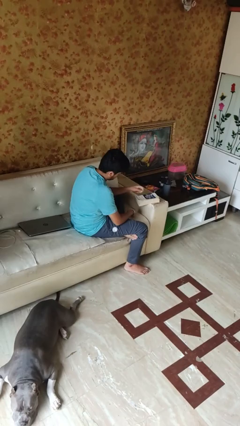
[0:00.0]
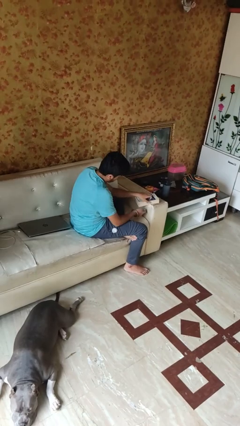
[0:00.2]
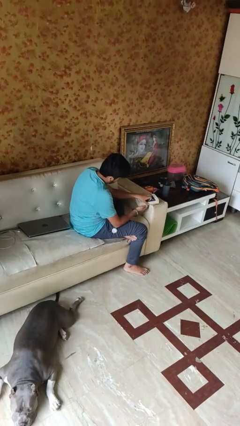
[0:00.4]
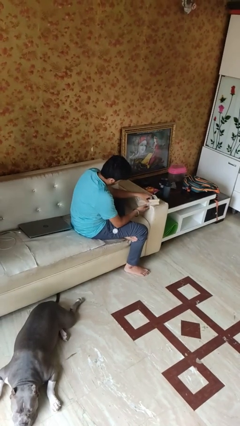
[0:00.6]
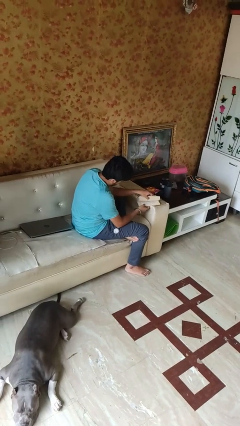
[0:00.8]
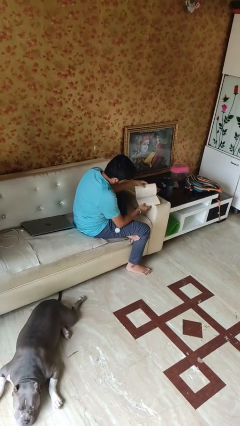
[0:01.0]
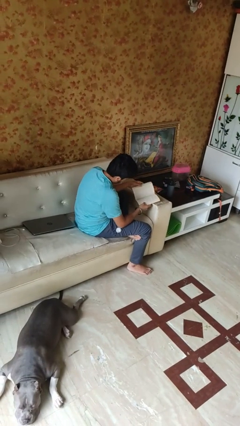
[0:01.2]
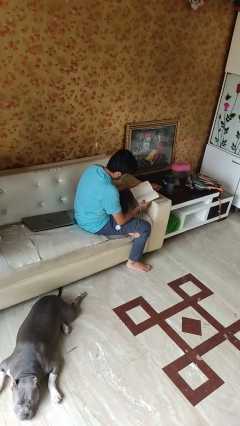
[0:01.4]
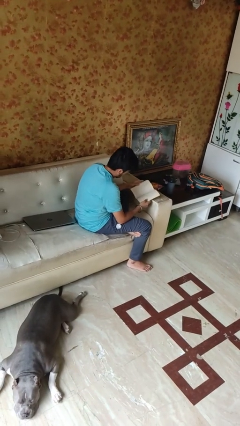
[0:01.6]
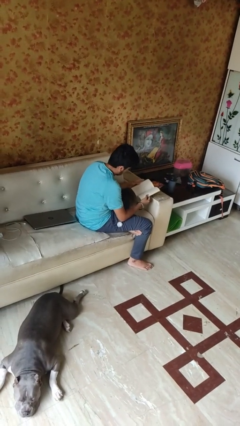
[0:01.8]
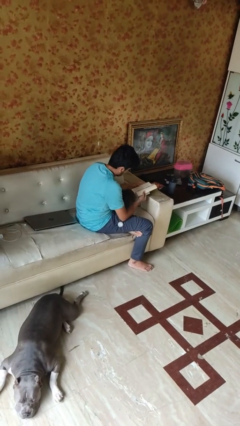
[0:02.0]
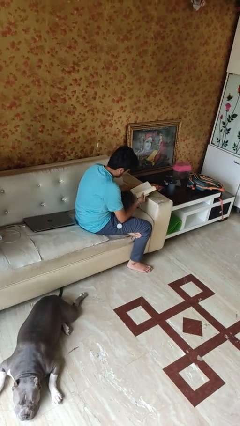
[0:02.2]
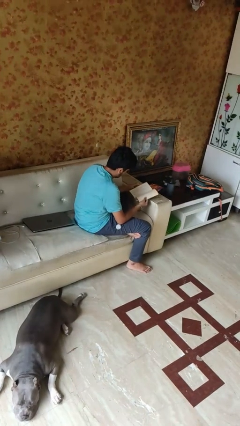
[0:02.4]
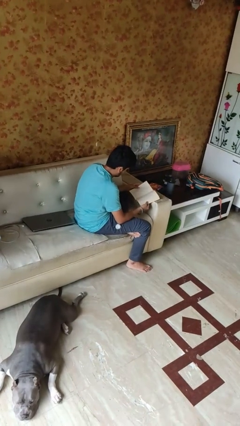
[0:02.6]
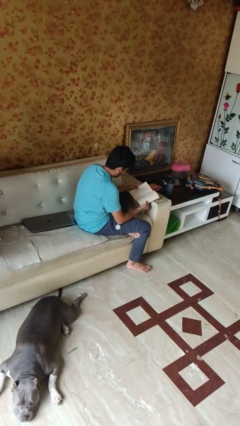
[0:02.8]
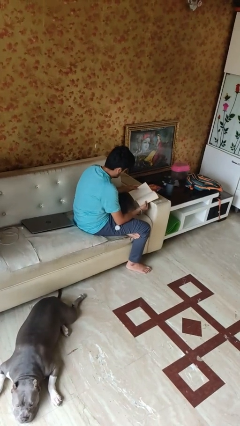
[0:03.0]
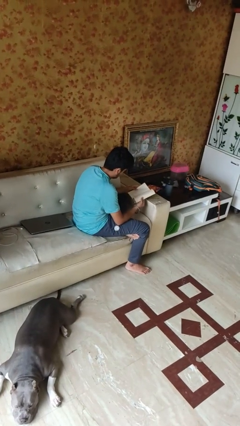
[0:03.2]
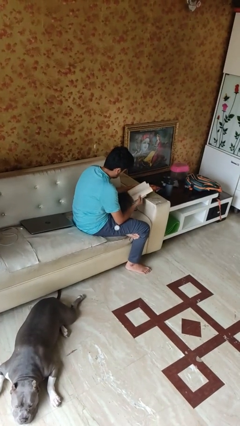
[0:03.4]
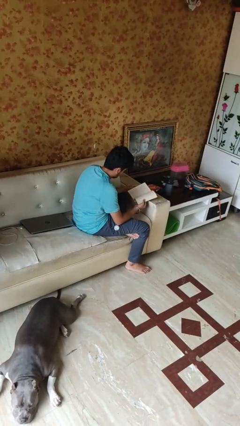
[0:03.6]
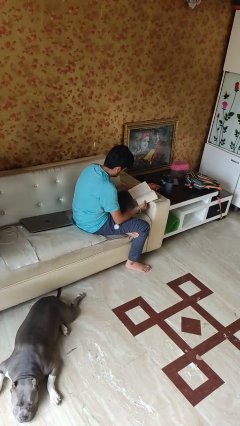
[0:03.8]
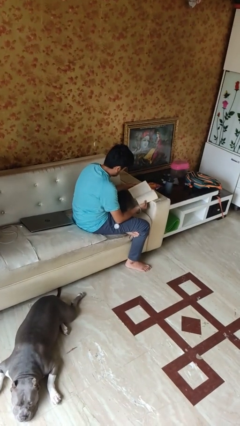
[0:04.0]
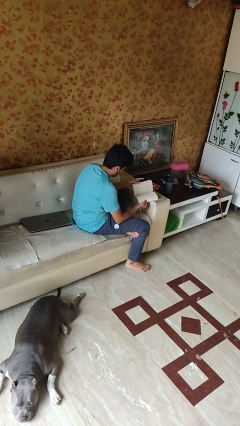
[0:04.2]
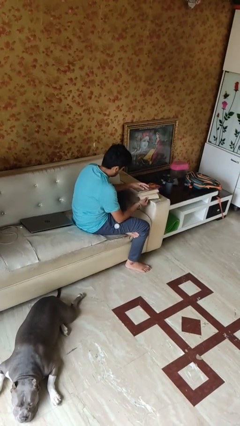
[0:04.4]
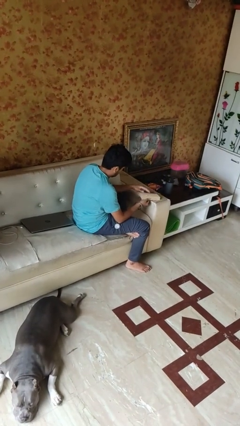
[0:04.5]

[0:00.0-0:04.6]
person reads book

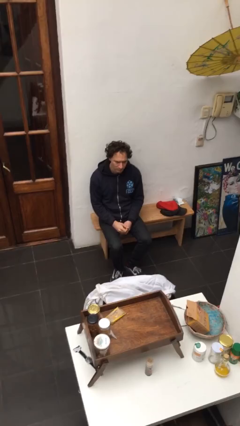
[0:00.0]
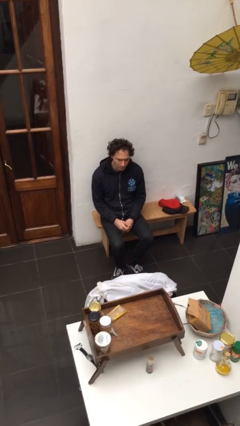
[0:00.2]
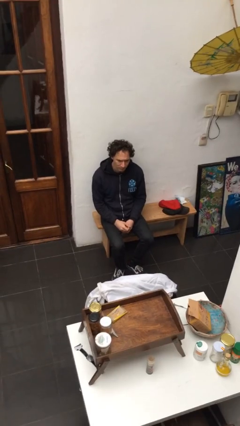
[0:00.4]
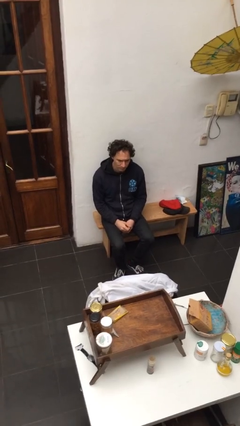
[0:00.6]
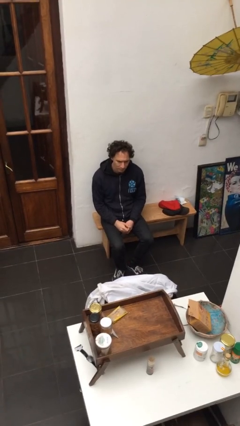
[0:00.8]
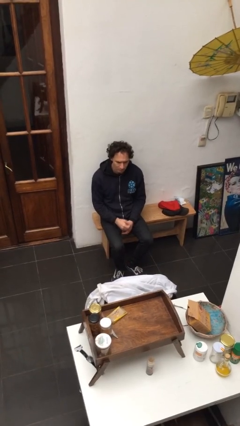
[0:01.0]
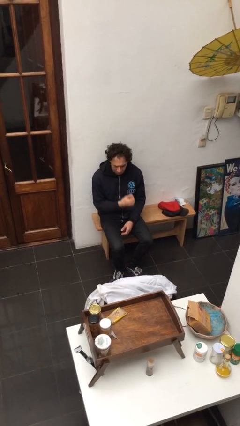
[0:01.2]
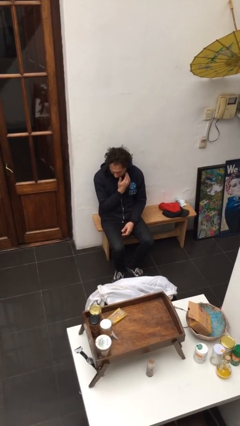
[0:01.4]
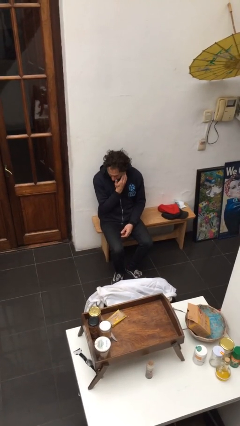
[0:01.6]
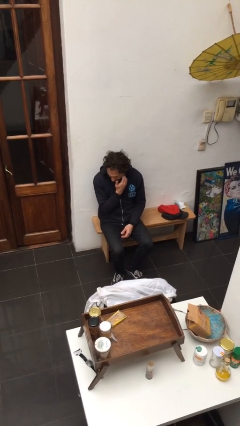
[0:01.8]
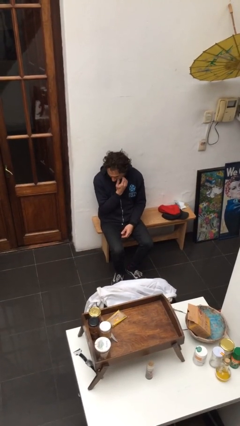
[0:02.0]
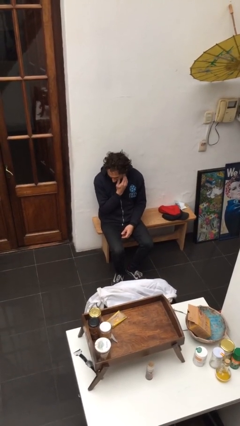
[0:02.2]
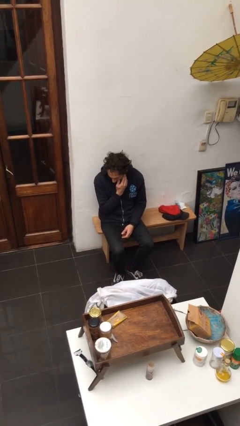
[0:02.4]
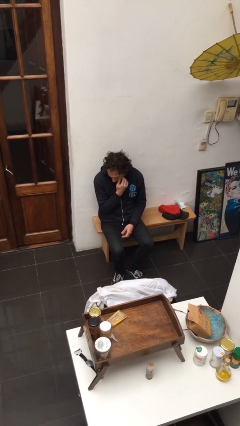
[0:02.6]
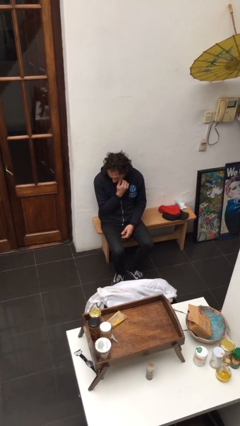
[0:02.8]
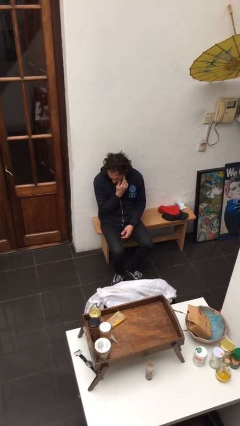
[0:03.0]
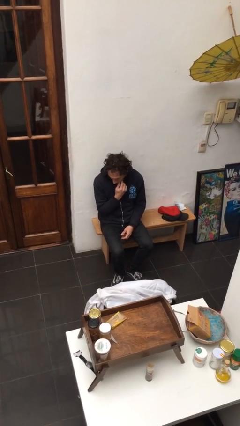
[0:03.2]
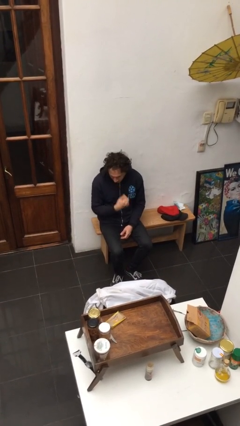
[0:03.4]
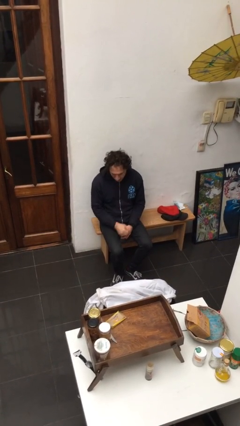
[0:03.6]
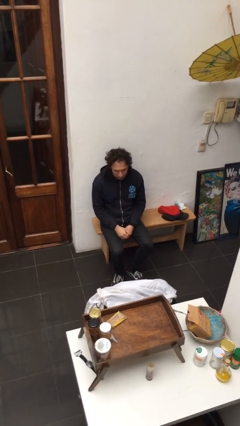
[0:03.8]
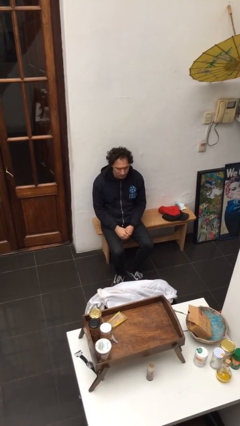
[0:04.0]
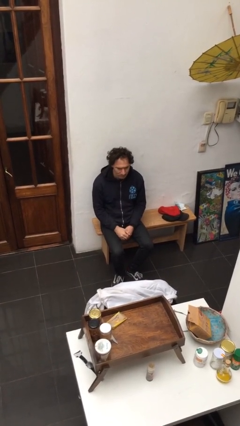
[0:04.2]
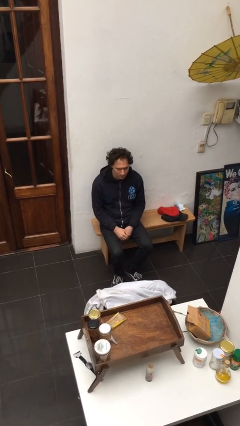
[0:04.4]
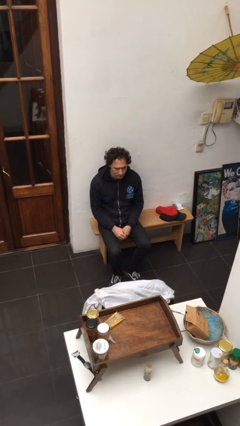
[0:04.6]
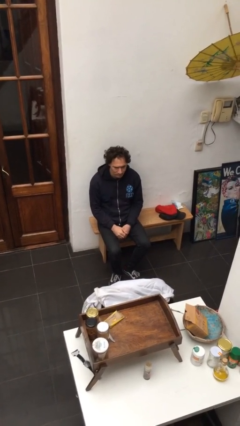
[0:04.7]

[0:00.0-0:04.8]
person scratches face

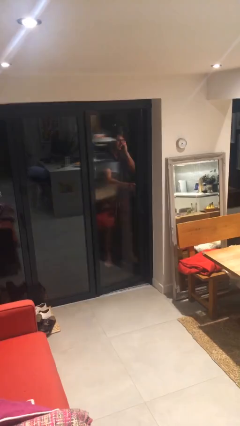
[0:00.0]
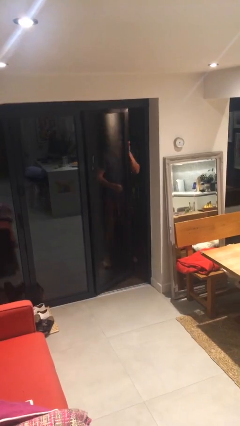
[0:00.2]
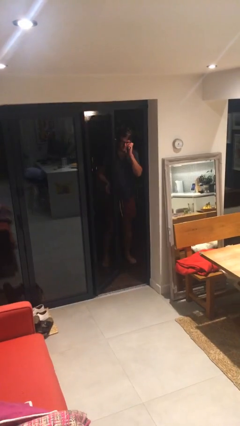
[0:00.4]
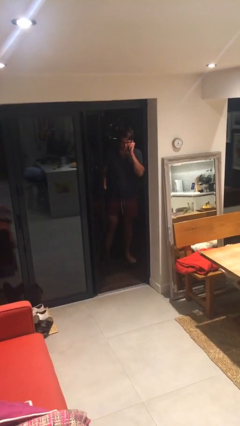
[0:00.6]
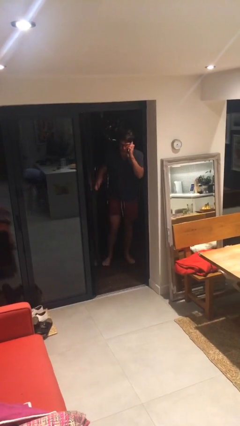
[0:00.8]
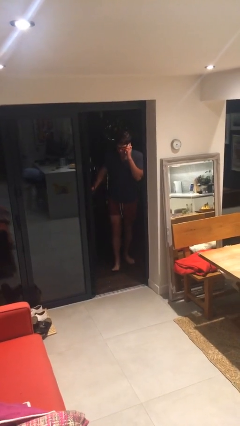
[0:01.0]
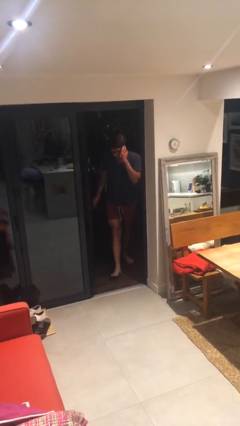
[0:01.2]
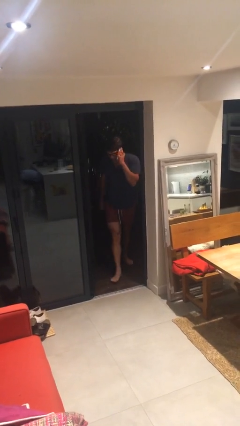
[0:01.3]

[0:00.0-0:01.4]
person opens facility door

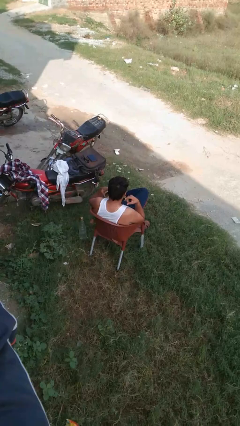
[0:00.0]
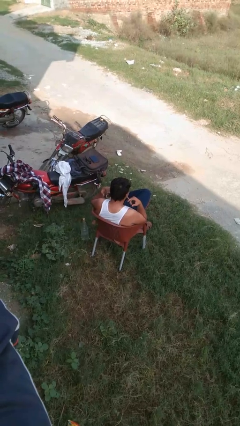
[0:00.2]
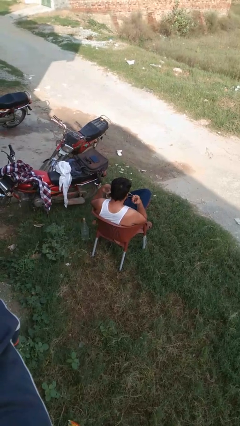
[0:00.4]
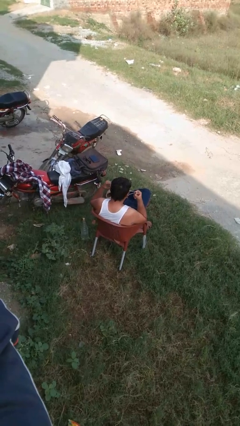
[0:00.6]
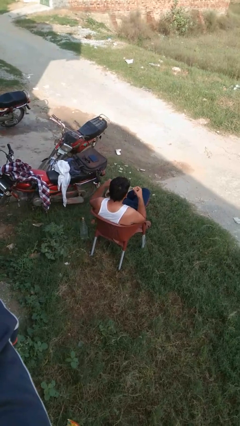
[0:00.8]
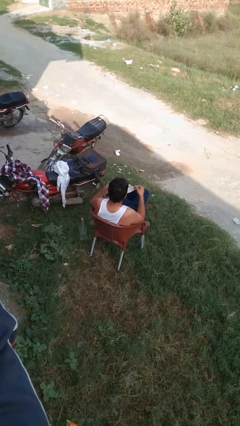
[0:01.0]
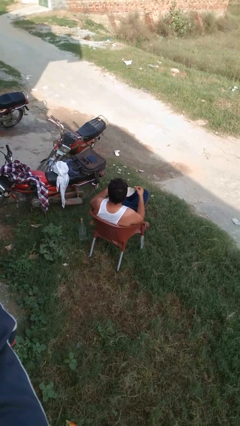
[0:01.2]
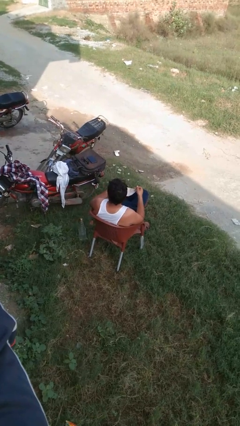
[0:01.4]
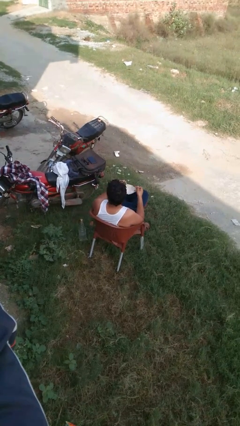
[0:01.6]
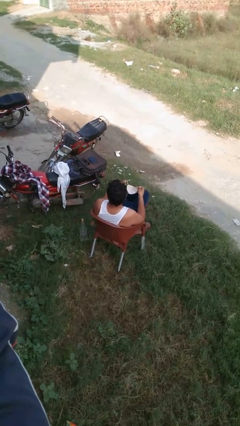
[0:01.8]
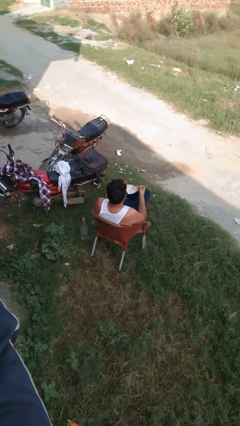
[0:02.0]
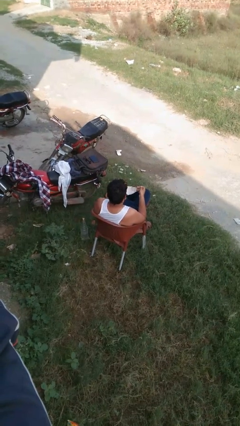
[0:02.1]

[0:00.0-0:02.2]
person takes off facemask

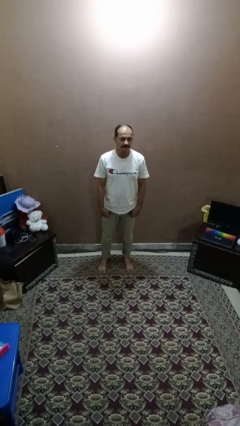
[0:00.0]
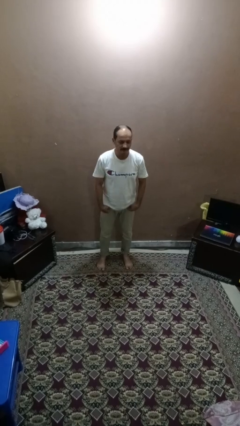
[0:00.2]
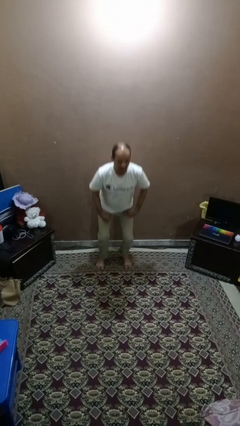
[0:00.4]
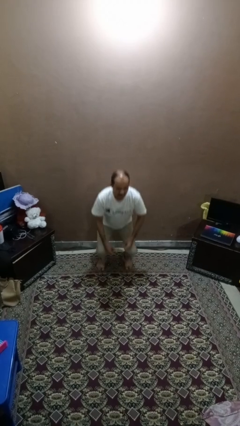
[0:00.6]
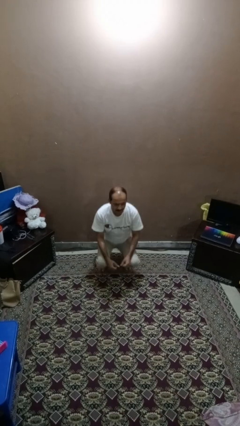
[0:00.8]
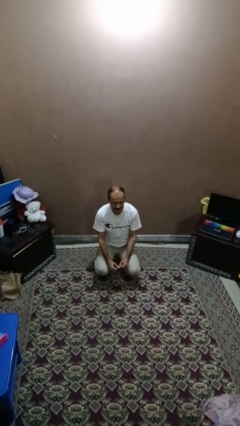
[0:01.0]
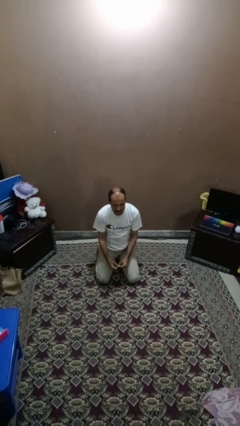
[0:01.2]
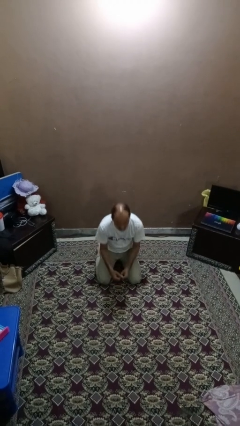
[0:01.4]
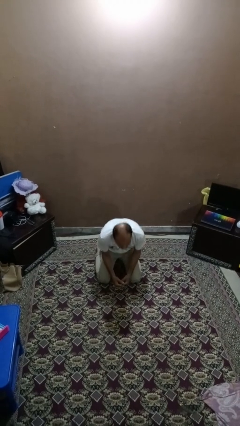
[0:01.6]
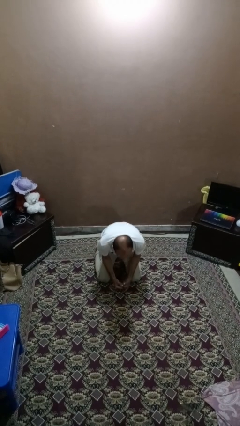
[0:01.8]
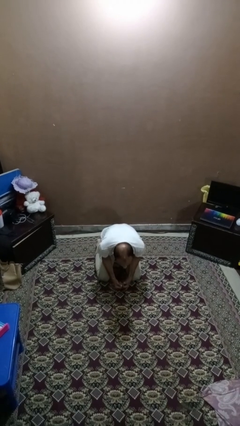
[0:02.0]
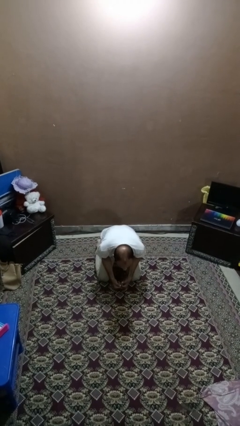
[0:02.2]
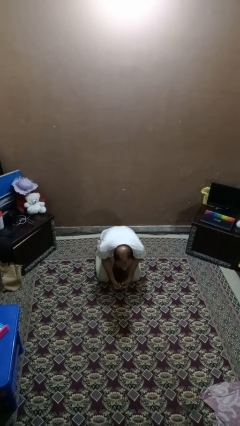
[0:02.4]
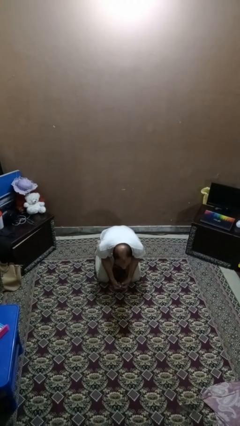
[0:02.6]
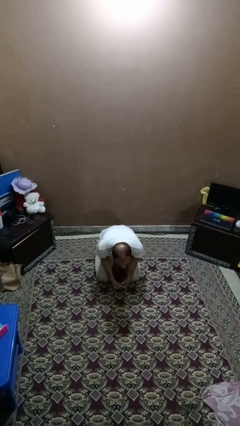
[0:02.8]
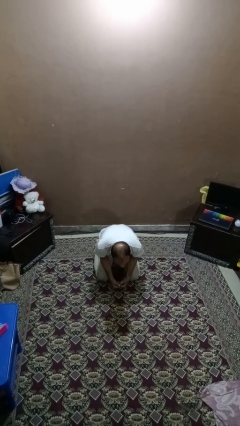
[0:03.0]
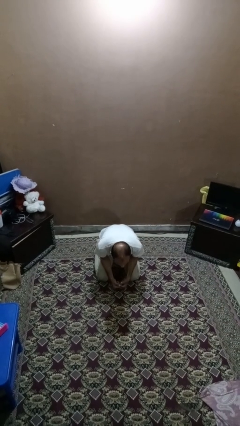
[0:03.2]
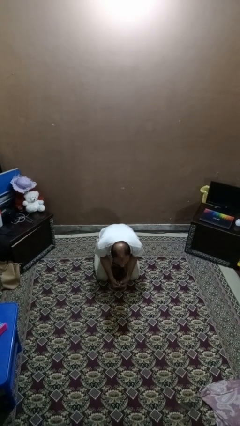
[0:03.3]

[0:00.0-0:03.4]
person kneels

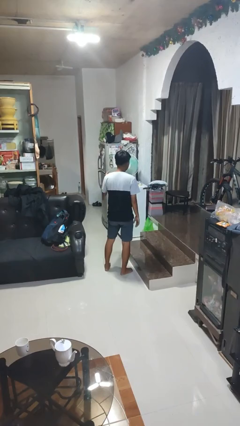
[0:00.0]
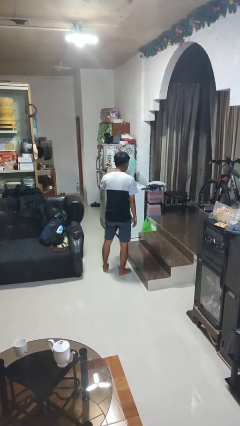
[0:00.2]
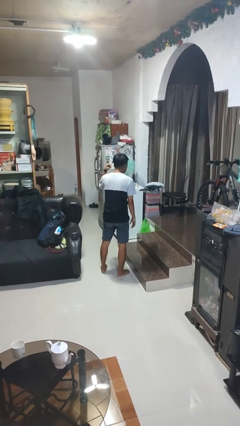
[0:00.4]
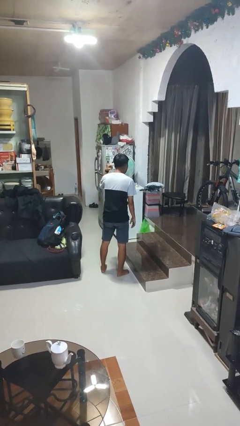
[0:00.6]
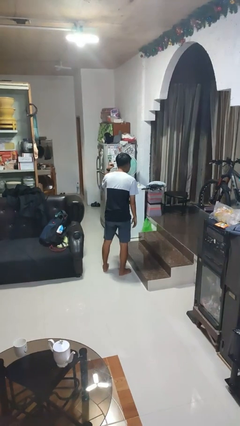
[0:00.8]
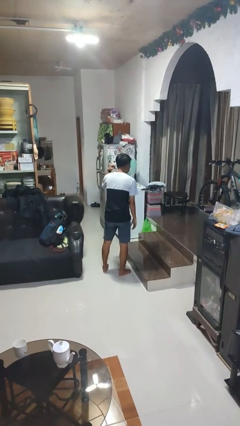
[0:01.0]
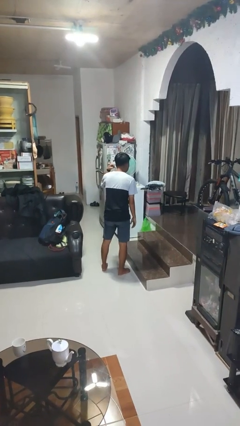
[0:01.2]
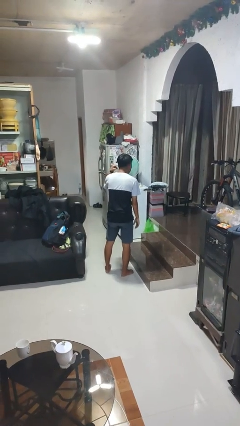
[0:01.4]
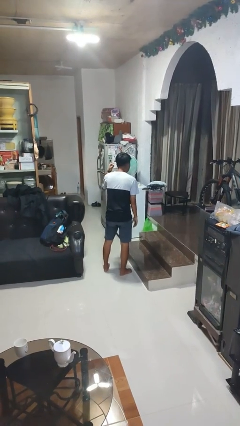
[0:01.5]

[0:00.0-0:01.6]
person gestures listen closely
